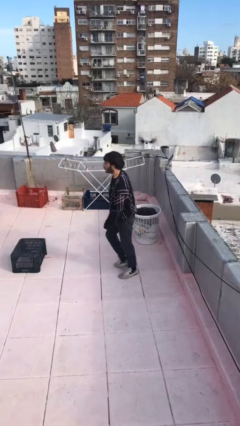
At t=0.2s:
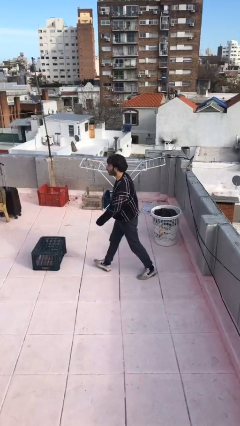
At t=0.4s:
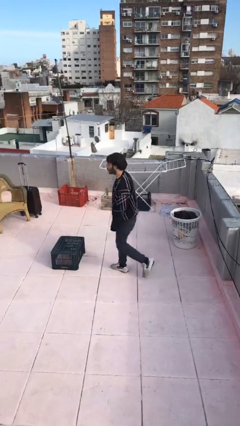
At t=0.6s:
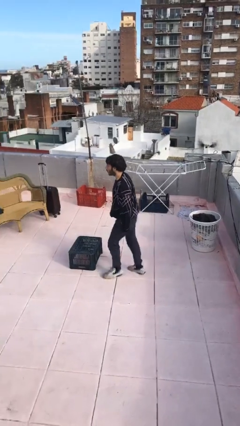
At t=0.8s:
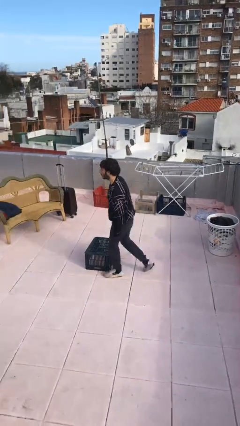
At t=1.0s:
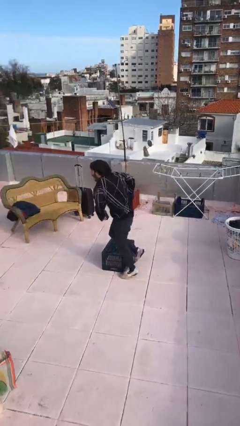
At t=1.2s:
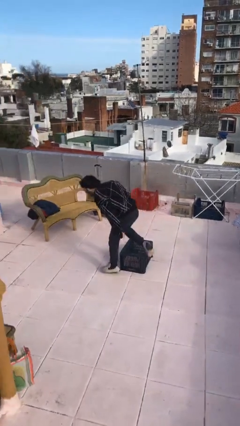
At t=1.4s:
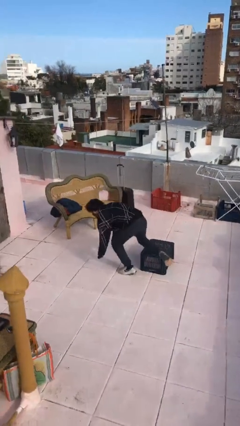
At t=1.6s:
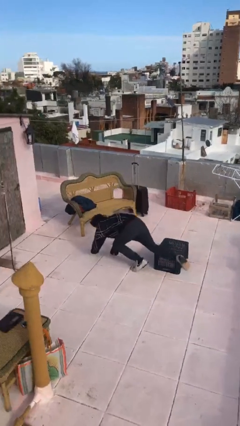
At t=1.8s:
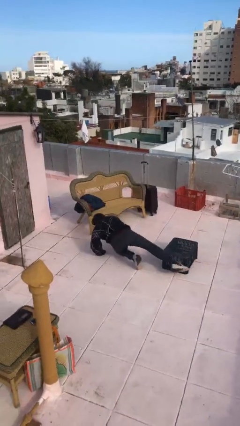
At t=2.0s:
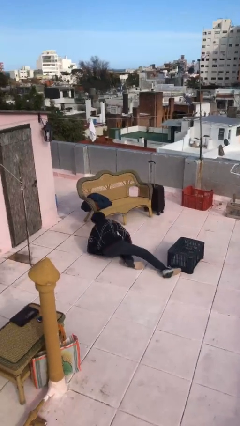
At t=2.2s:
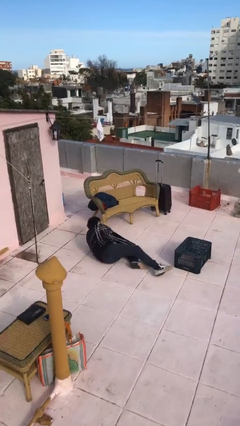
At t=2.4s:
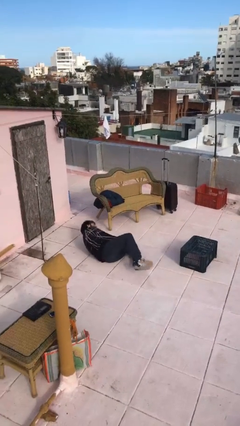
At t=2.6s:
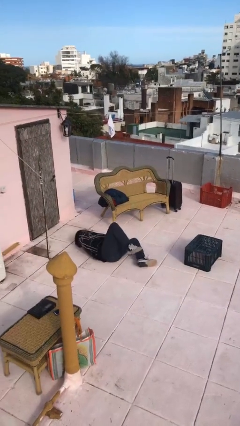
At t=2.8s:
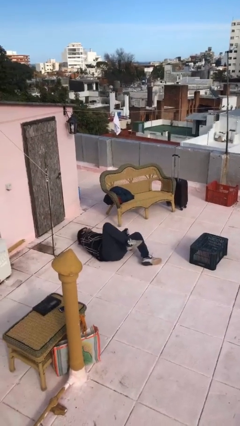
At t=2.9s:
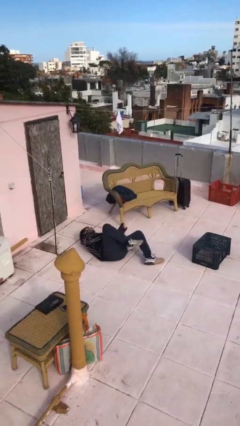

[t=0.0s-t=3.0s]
person trips on object on floor

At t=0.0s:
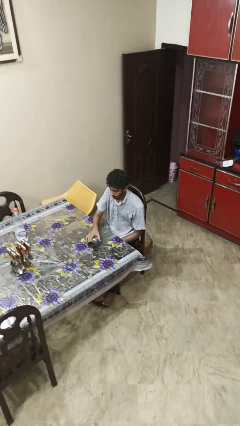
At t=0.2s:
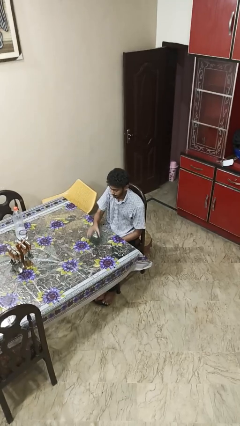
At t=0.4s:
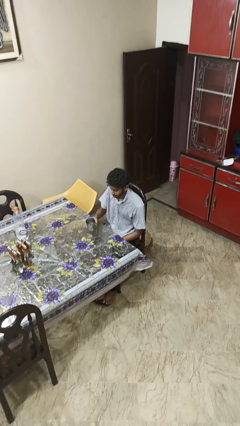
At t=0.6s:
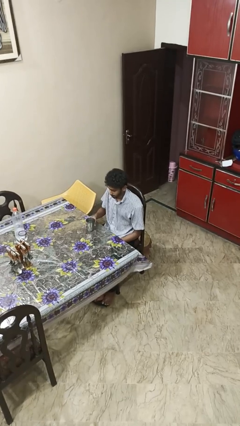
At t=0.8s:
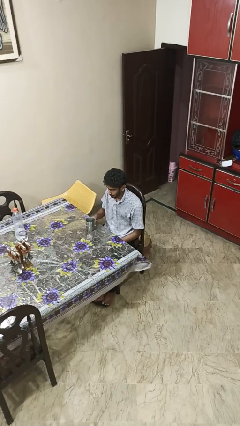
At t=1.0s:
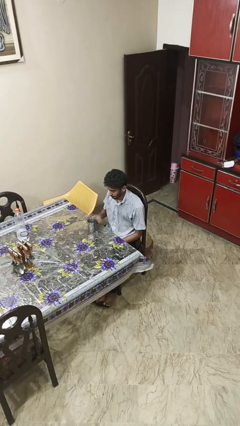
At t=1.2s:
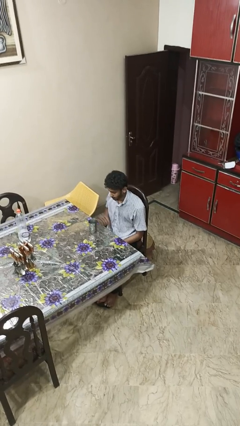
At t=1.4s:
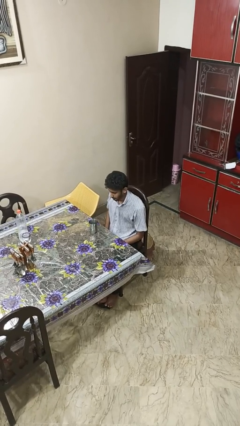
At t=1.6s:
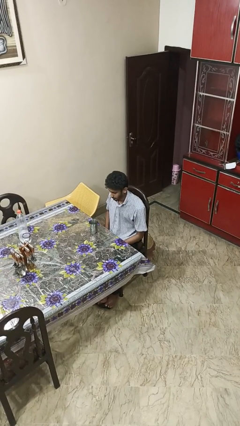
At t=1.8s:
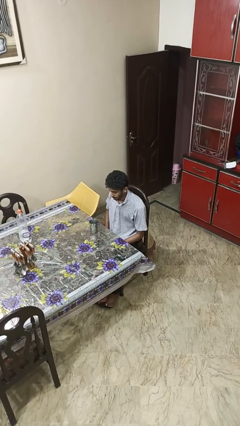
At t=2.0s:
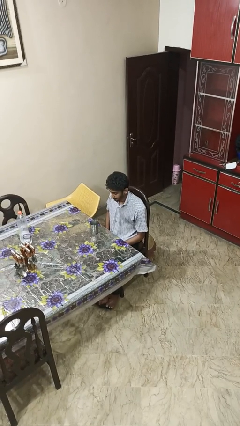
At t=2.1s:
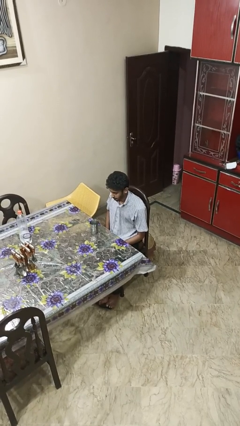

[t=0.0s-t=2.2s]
person sets upright glass

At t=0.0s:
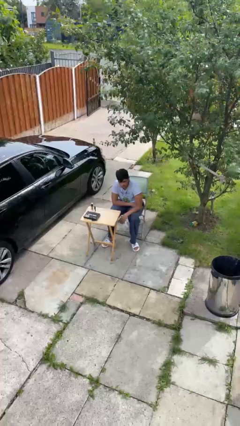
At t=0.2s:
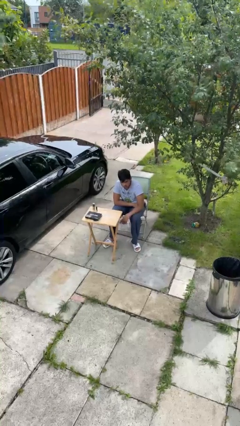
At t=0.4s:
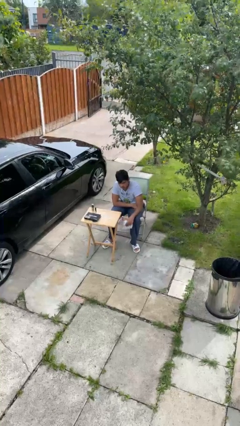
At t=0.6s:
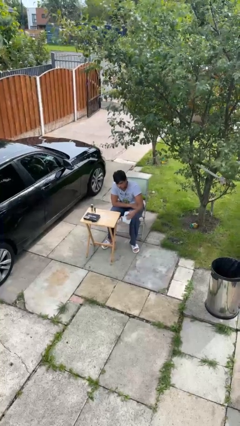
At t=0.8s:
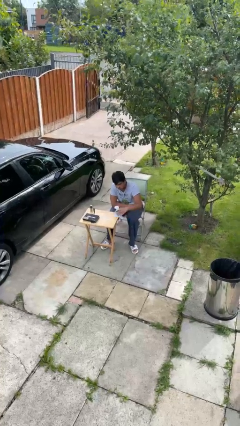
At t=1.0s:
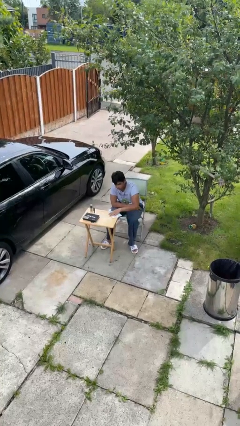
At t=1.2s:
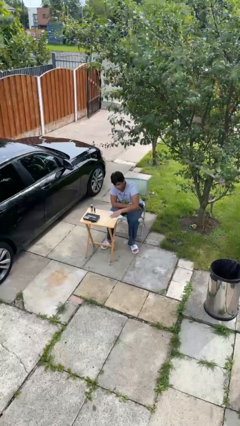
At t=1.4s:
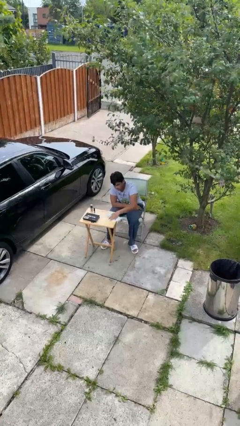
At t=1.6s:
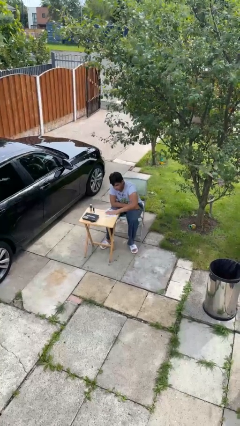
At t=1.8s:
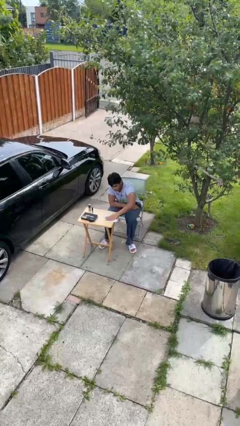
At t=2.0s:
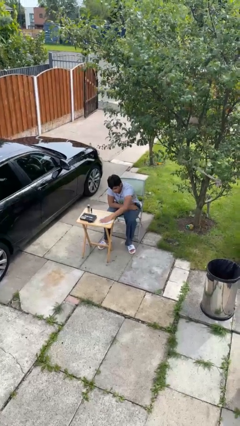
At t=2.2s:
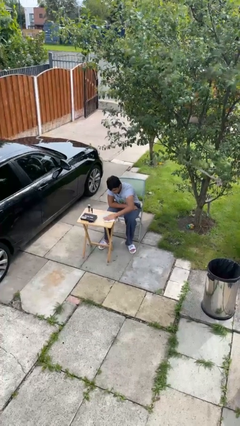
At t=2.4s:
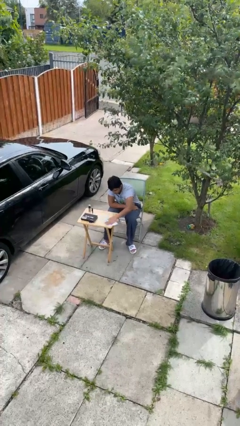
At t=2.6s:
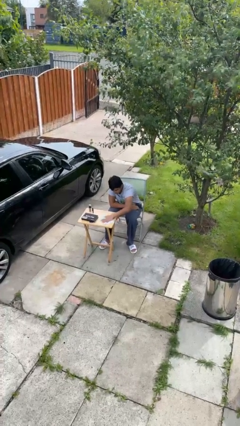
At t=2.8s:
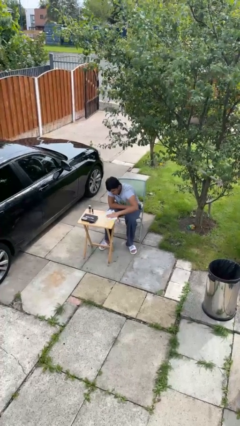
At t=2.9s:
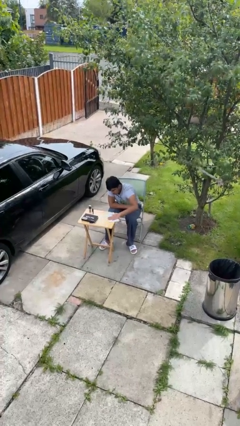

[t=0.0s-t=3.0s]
person cleans table with rag

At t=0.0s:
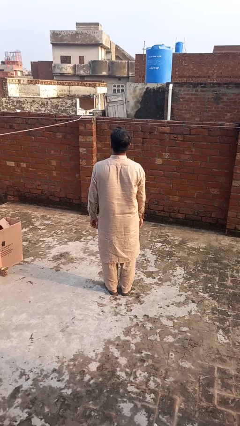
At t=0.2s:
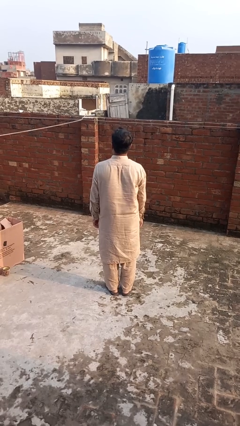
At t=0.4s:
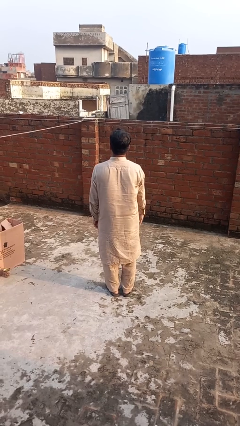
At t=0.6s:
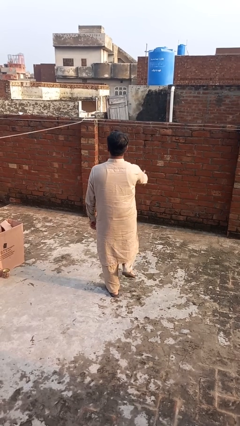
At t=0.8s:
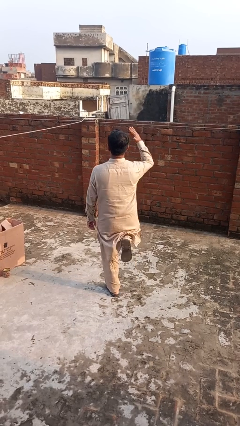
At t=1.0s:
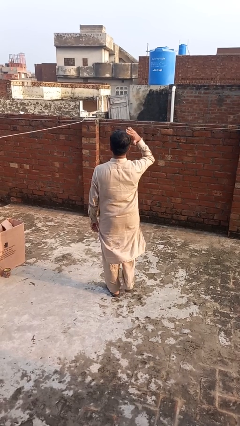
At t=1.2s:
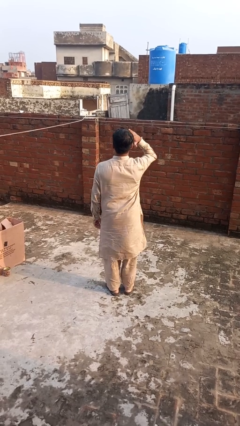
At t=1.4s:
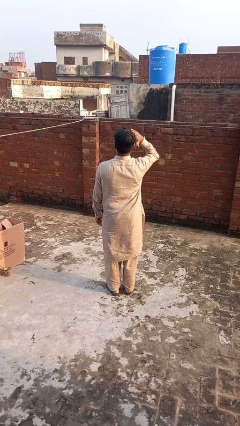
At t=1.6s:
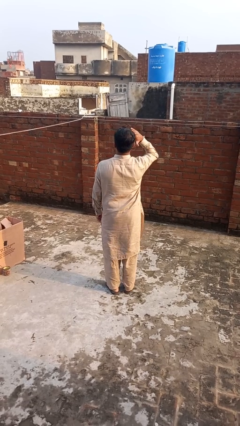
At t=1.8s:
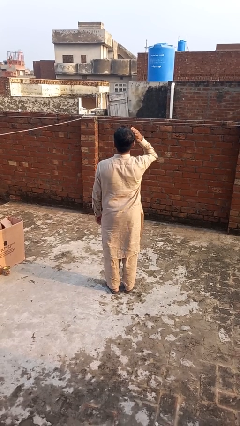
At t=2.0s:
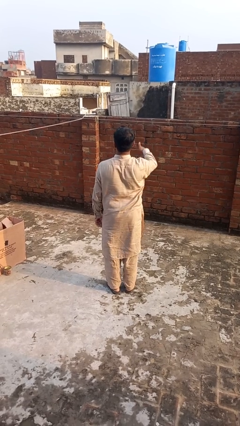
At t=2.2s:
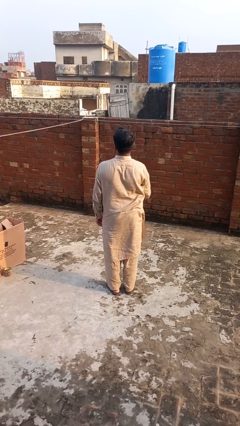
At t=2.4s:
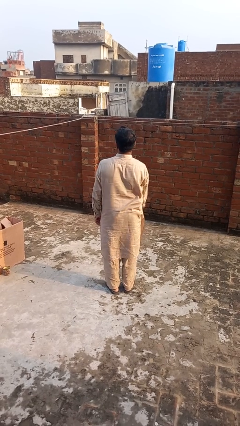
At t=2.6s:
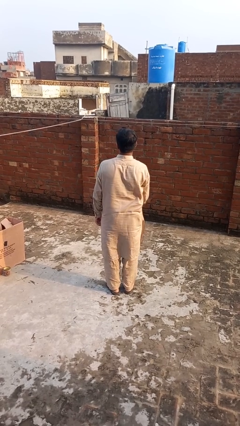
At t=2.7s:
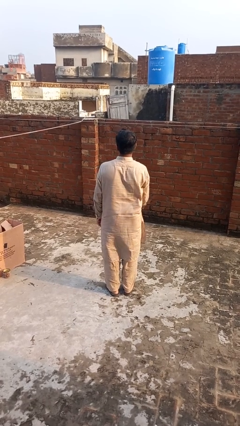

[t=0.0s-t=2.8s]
person salutes

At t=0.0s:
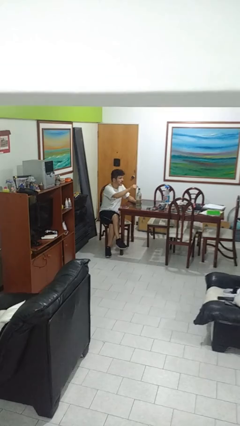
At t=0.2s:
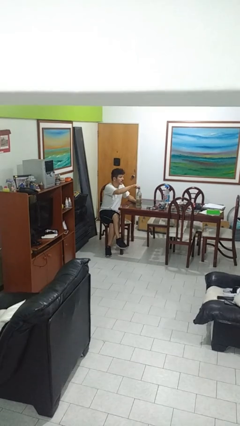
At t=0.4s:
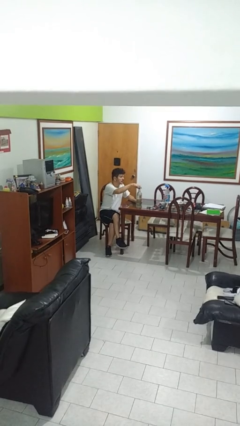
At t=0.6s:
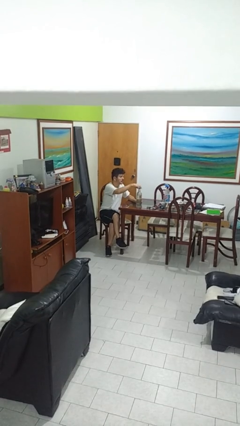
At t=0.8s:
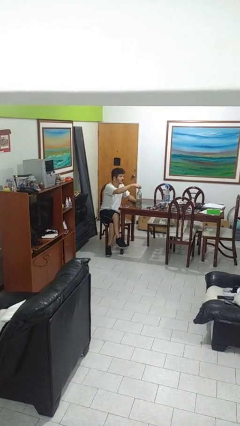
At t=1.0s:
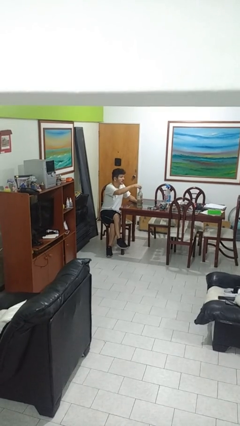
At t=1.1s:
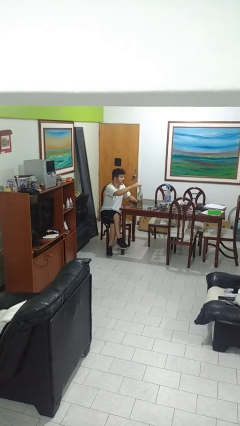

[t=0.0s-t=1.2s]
person unscrews lid from bottle

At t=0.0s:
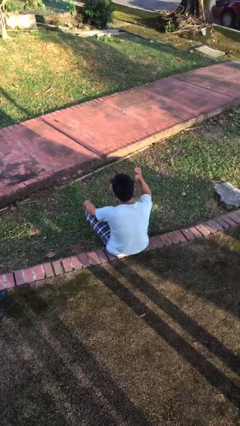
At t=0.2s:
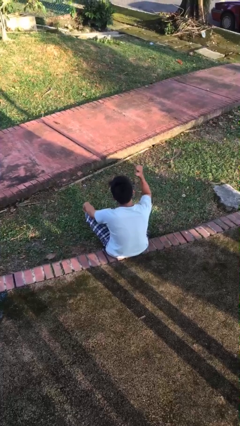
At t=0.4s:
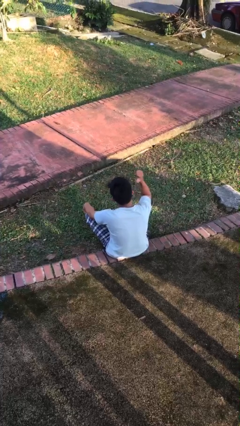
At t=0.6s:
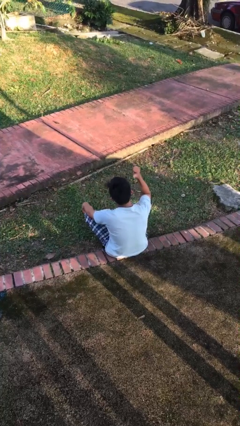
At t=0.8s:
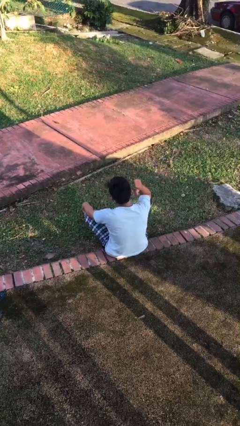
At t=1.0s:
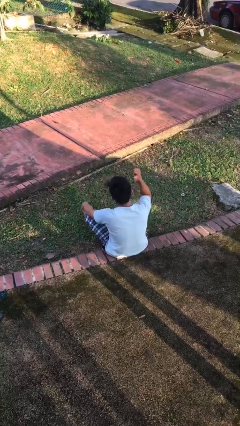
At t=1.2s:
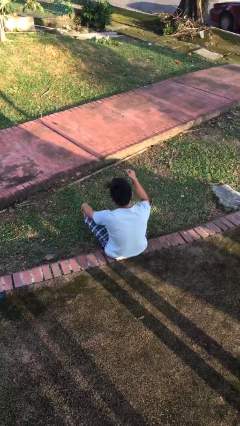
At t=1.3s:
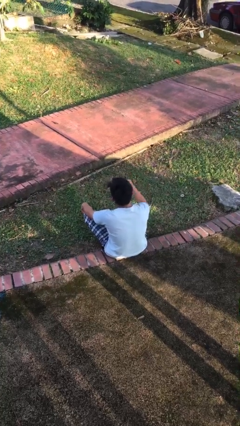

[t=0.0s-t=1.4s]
person gestures behind me

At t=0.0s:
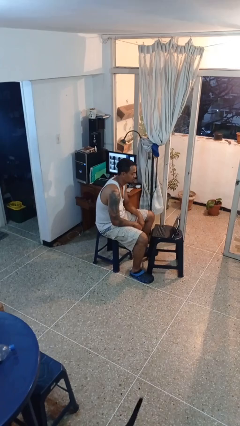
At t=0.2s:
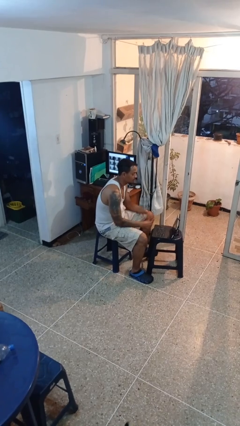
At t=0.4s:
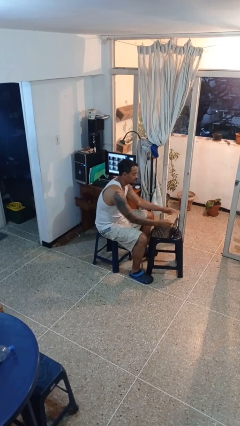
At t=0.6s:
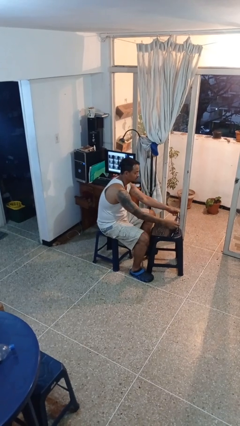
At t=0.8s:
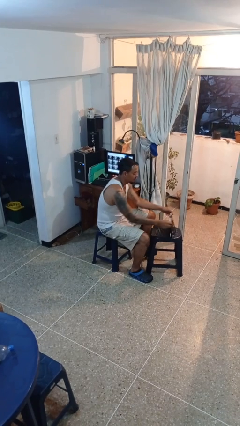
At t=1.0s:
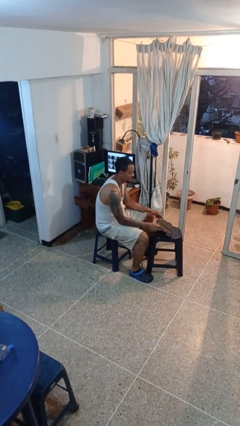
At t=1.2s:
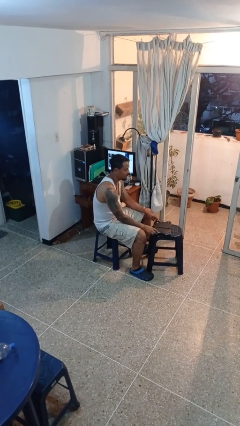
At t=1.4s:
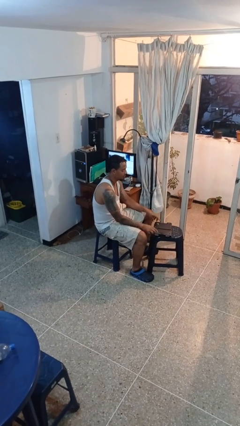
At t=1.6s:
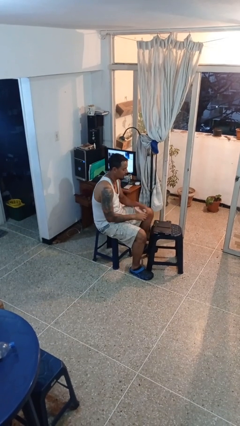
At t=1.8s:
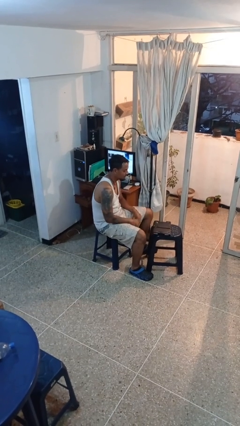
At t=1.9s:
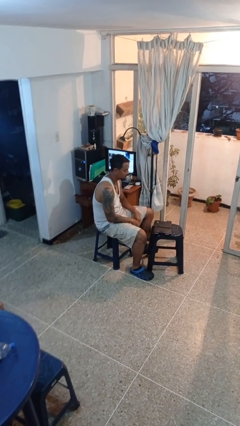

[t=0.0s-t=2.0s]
person closes laptop

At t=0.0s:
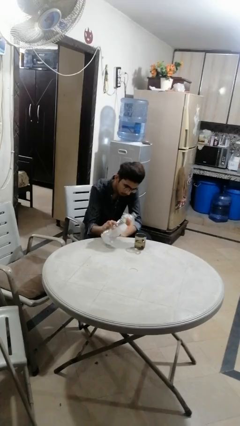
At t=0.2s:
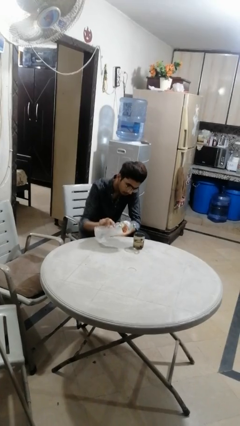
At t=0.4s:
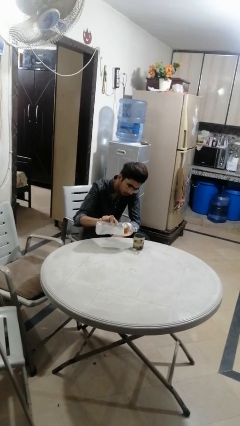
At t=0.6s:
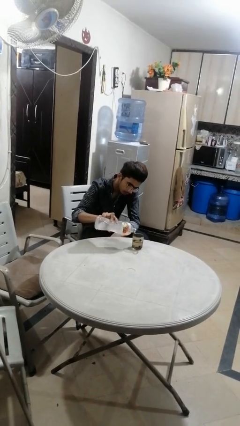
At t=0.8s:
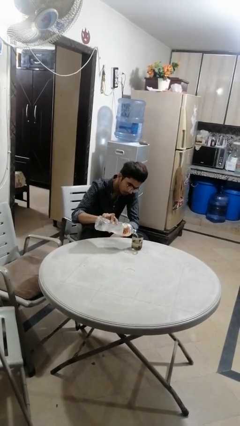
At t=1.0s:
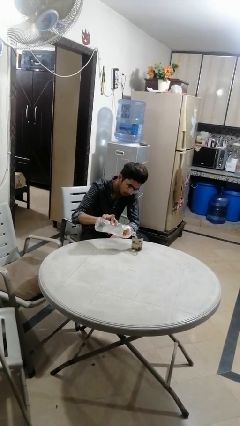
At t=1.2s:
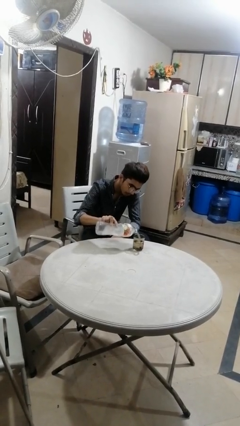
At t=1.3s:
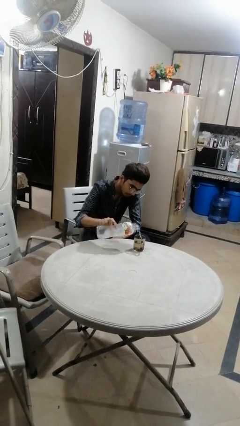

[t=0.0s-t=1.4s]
person pours liquid into cup
